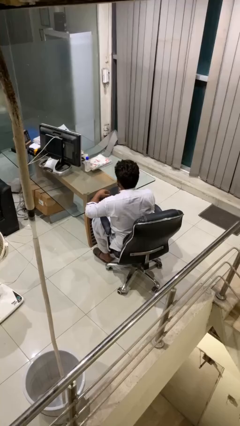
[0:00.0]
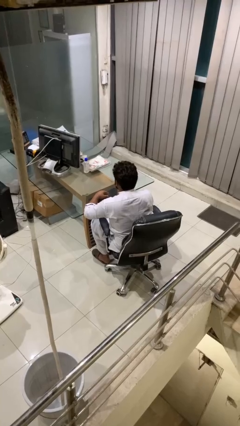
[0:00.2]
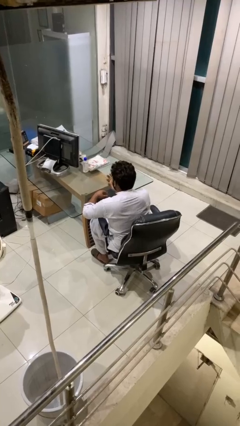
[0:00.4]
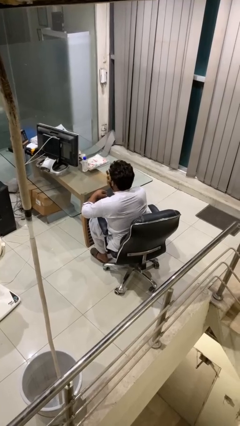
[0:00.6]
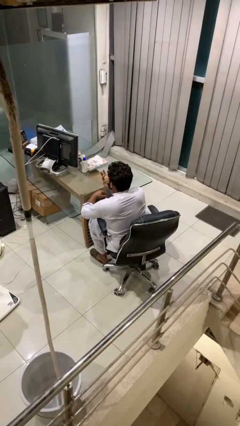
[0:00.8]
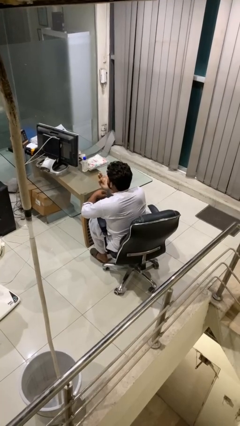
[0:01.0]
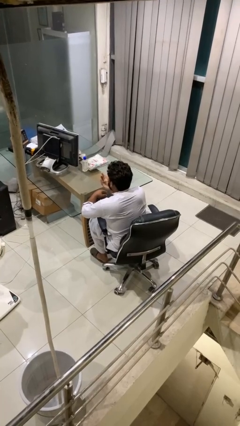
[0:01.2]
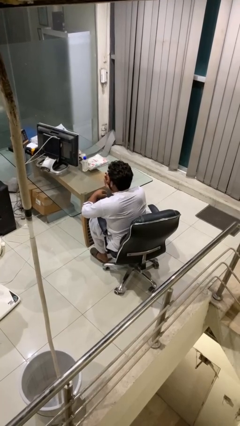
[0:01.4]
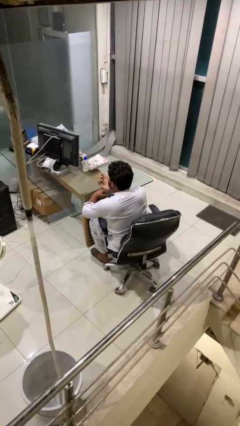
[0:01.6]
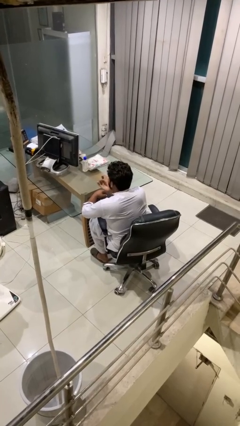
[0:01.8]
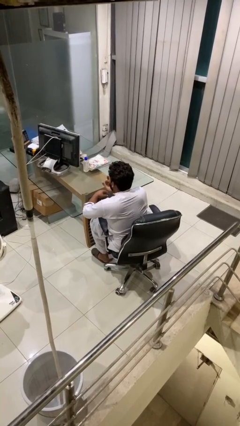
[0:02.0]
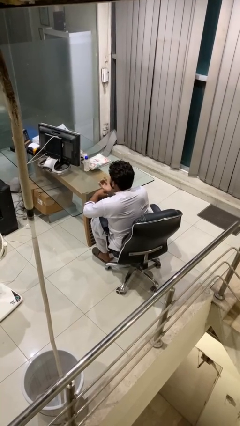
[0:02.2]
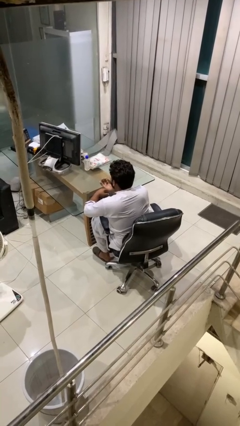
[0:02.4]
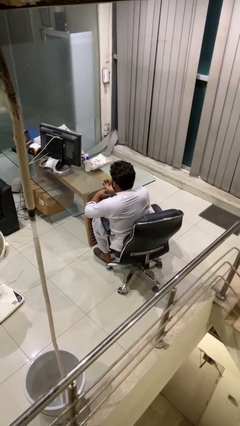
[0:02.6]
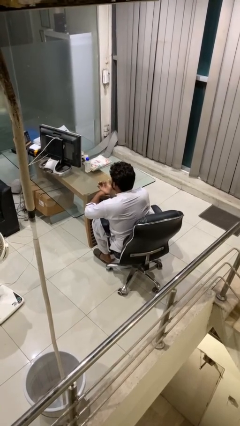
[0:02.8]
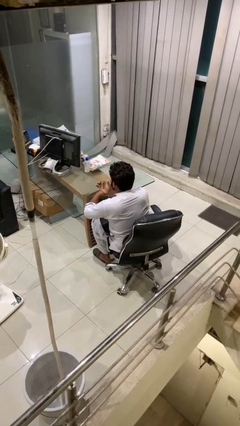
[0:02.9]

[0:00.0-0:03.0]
person licks fingers

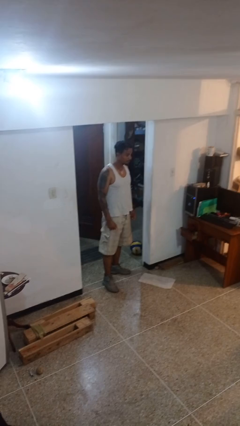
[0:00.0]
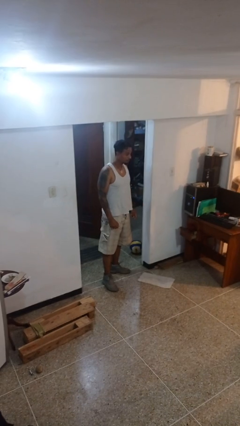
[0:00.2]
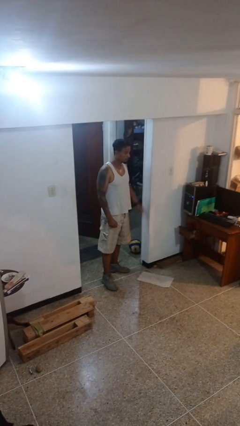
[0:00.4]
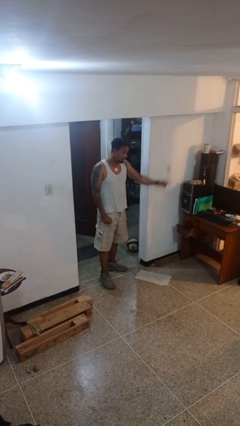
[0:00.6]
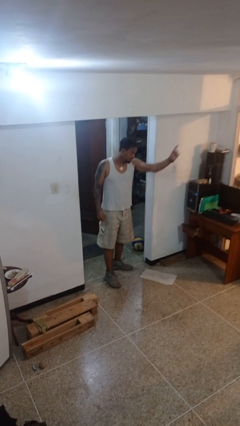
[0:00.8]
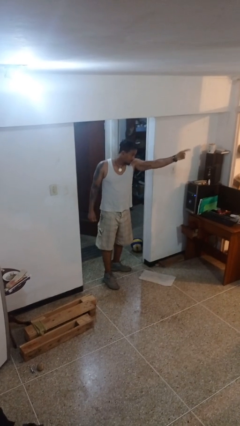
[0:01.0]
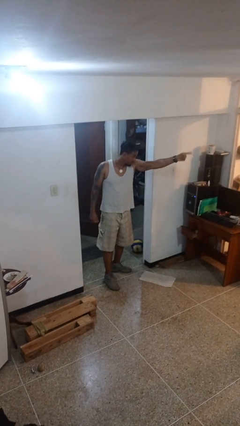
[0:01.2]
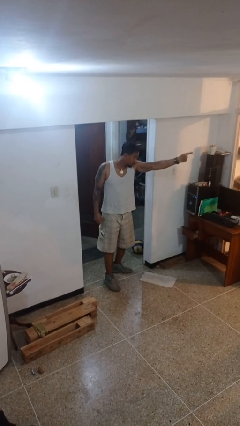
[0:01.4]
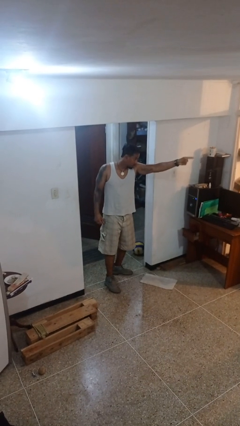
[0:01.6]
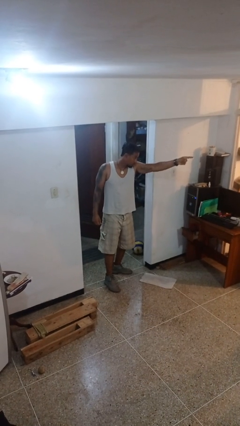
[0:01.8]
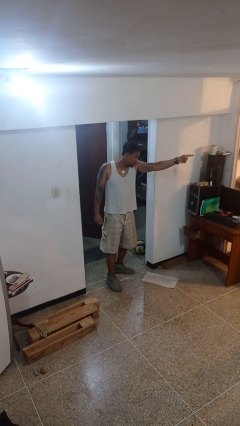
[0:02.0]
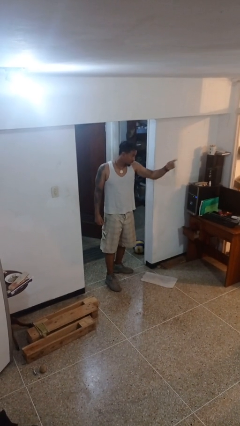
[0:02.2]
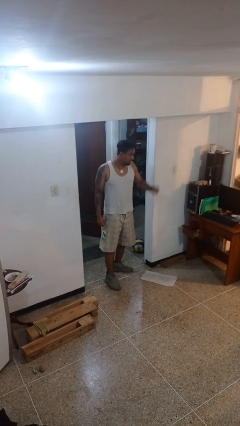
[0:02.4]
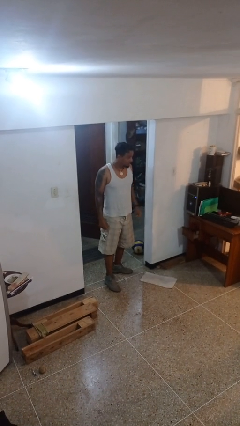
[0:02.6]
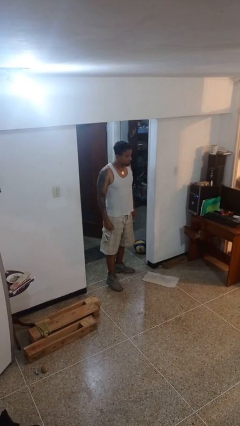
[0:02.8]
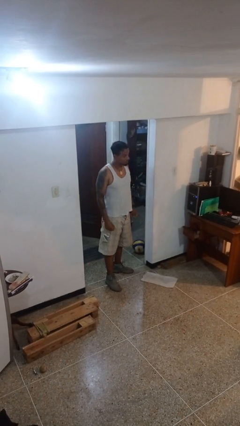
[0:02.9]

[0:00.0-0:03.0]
person points at person

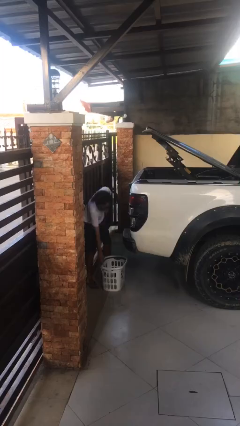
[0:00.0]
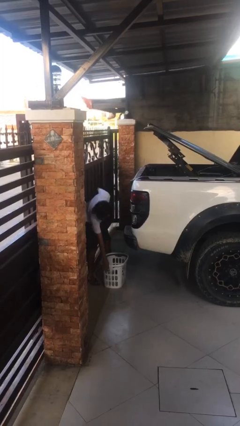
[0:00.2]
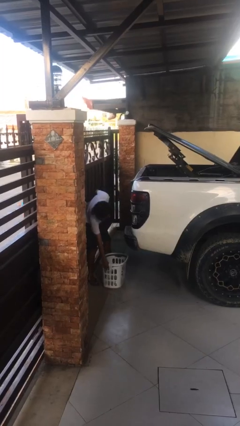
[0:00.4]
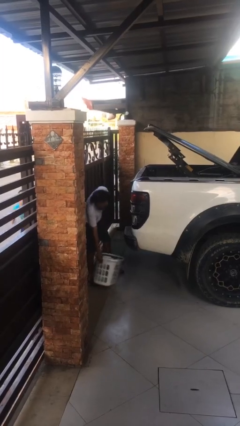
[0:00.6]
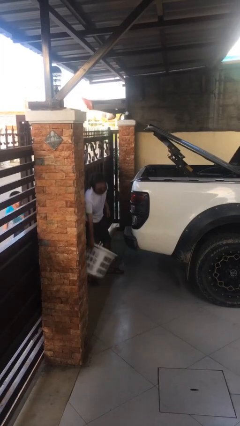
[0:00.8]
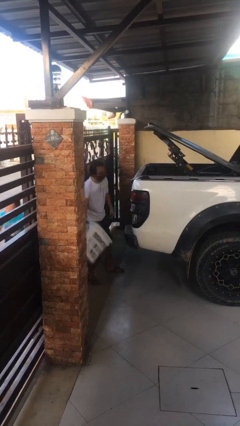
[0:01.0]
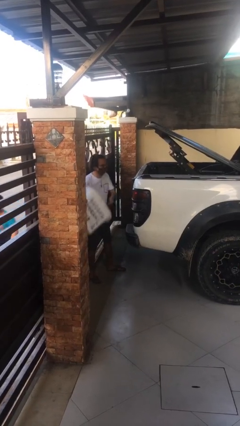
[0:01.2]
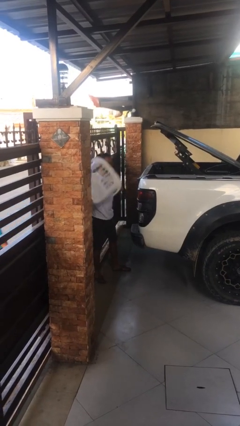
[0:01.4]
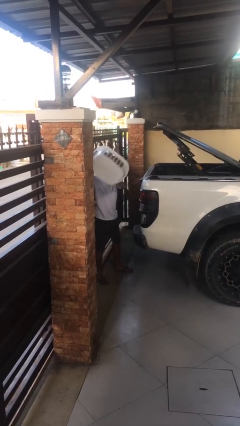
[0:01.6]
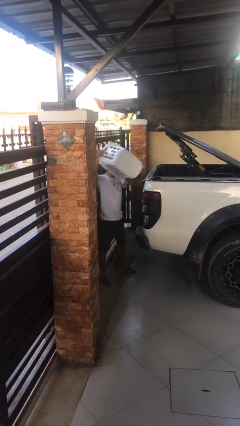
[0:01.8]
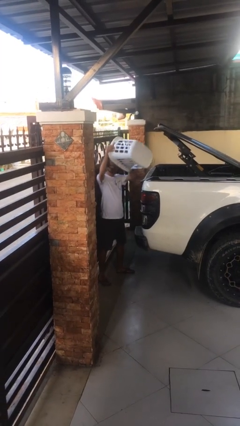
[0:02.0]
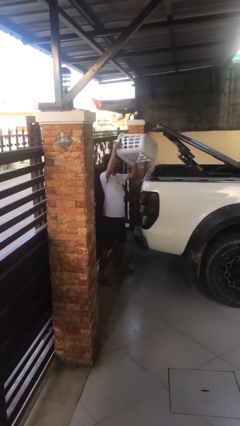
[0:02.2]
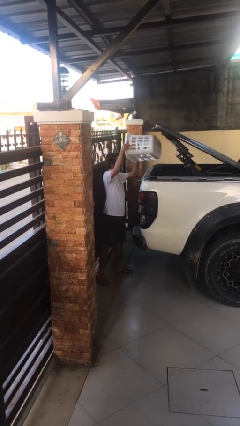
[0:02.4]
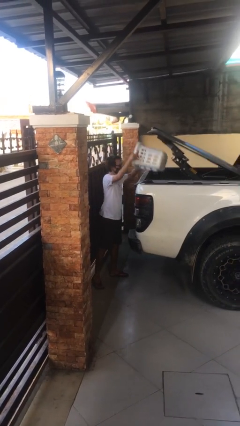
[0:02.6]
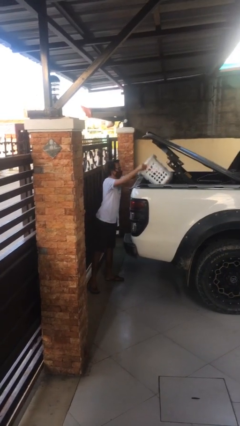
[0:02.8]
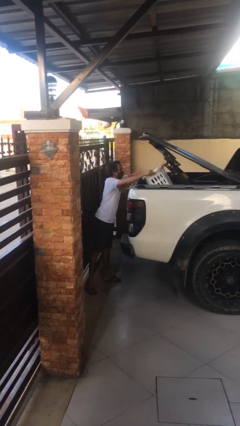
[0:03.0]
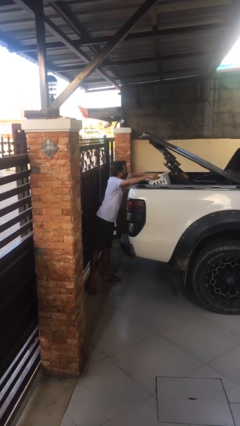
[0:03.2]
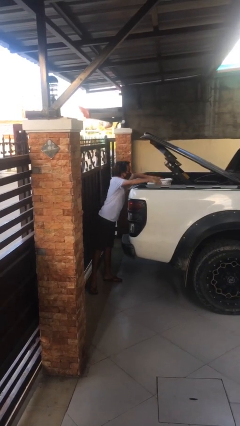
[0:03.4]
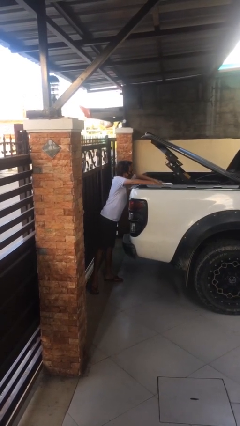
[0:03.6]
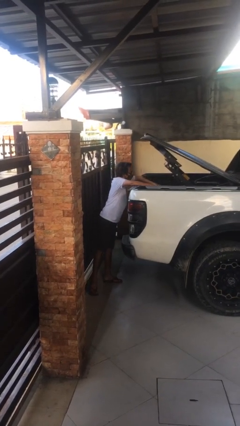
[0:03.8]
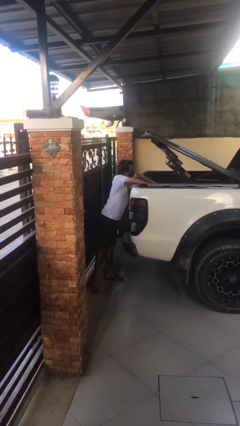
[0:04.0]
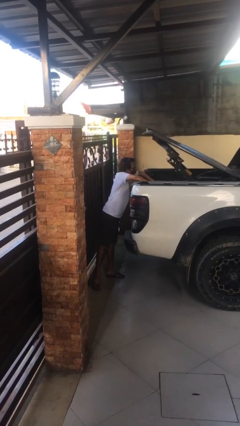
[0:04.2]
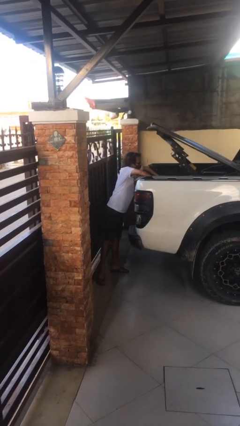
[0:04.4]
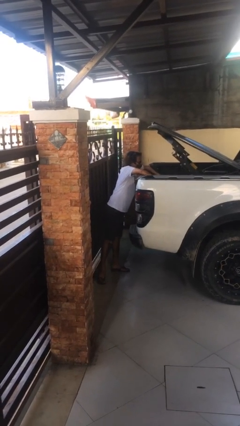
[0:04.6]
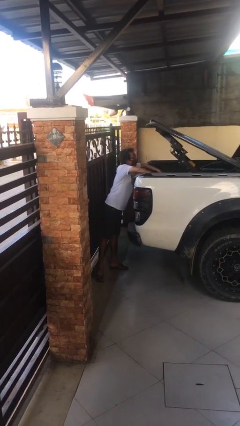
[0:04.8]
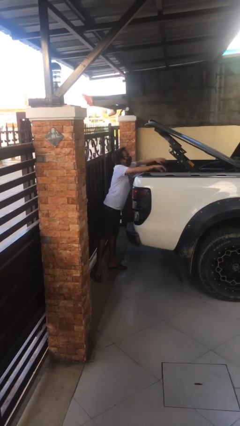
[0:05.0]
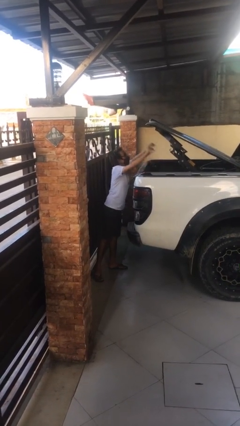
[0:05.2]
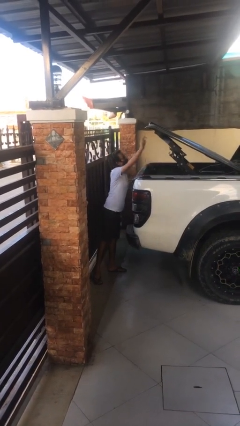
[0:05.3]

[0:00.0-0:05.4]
person loads car

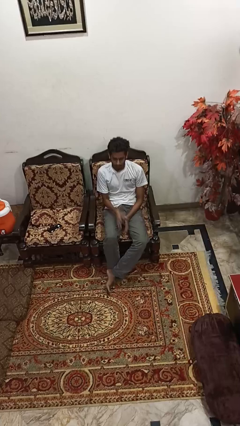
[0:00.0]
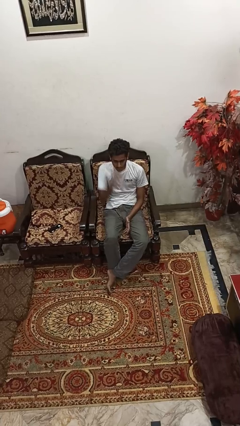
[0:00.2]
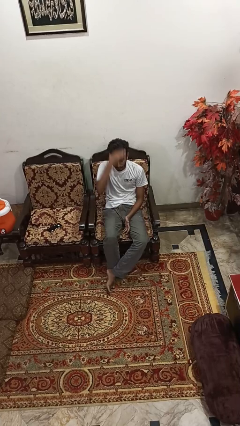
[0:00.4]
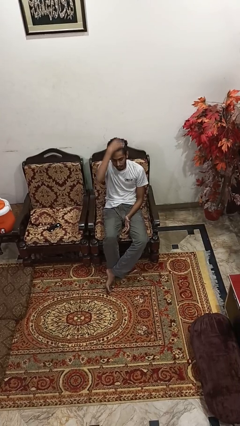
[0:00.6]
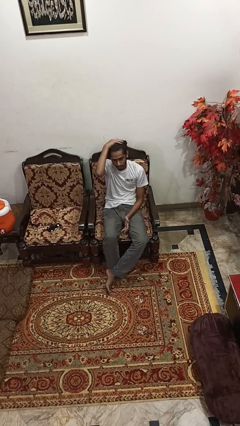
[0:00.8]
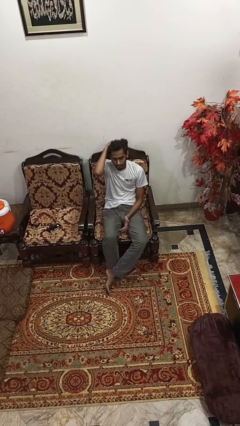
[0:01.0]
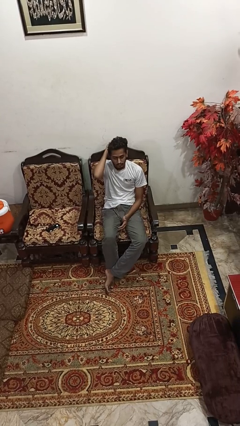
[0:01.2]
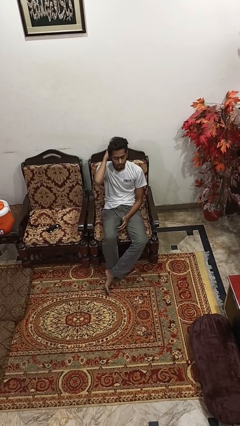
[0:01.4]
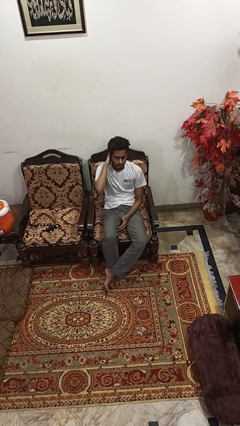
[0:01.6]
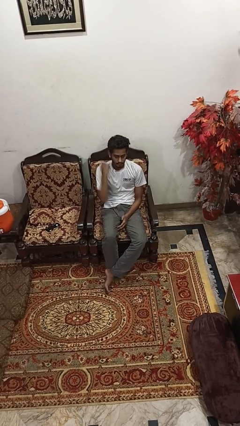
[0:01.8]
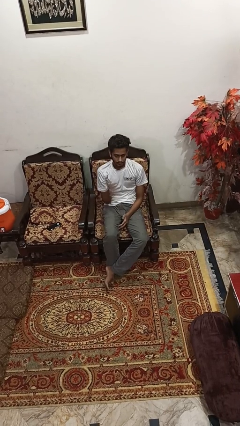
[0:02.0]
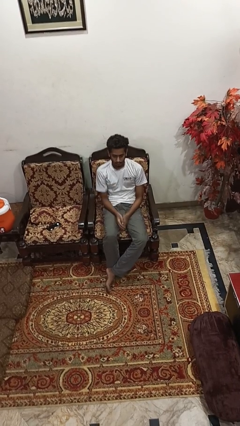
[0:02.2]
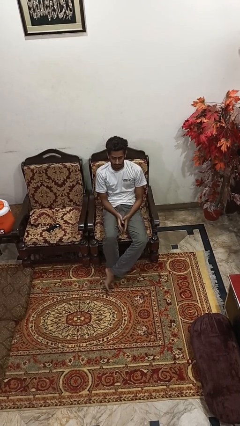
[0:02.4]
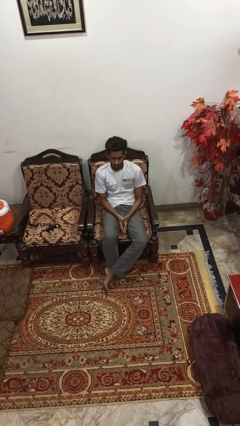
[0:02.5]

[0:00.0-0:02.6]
person strokes hair

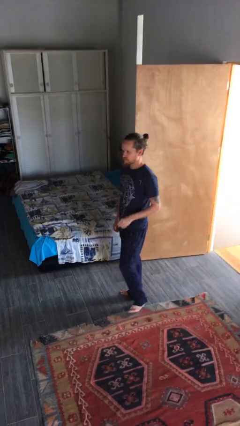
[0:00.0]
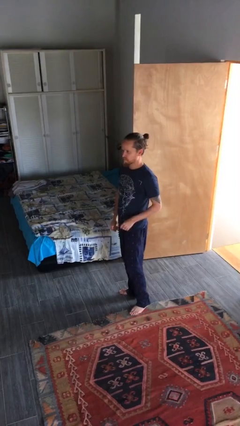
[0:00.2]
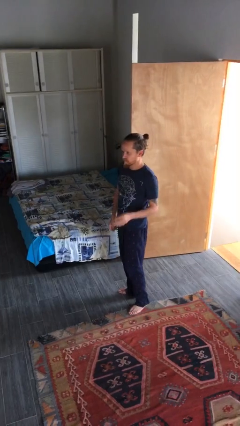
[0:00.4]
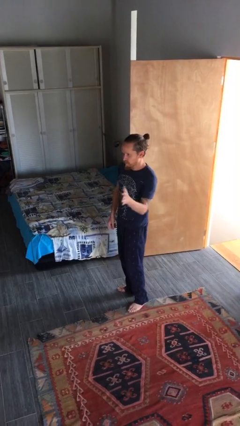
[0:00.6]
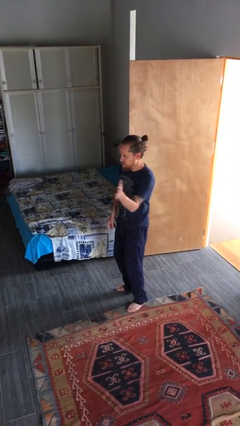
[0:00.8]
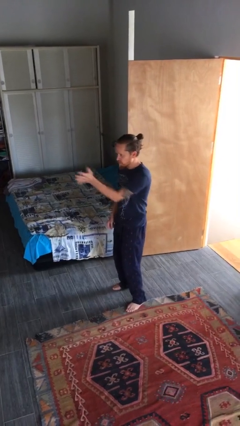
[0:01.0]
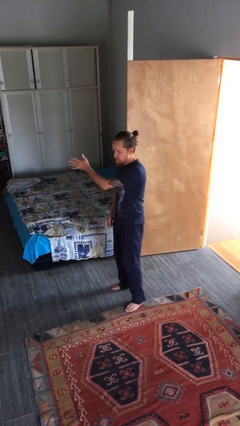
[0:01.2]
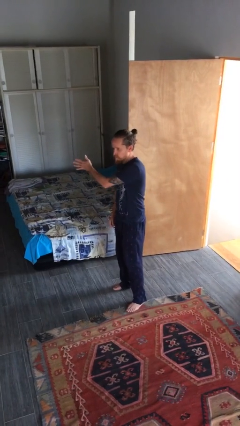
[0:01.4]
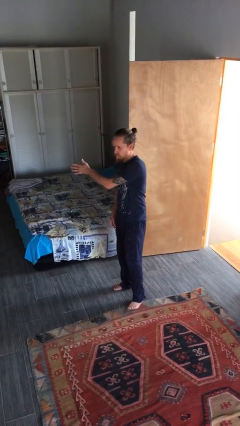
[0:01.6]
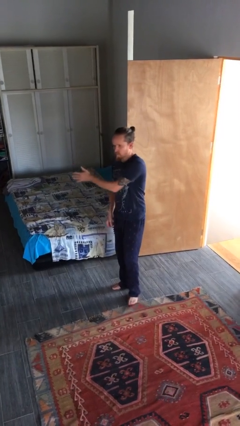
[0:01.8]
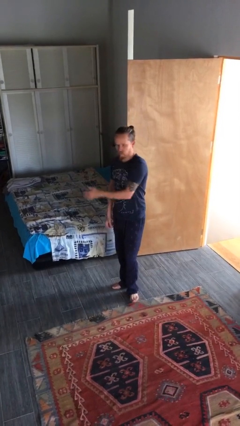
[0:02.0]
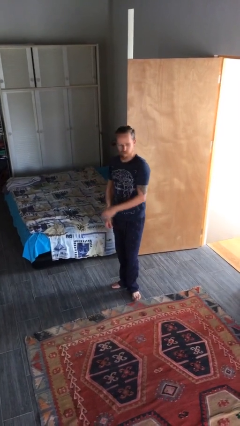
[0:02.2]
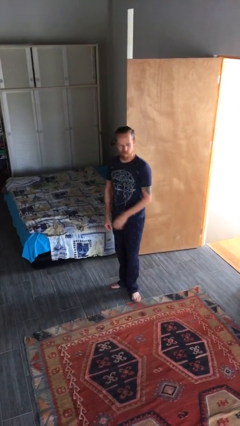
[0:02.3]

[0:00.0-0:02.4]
person gestures swipe right

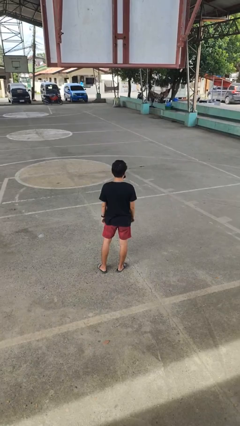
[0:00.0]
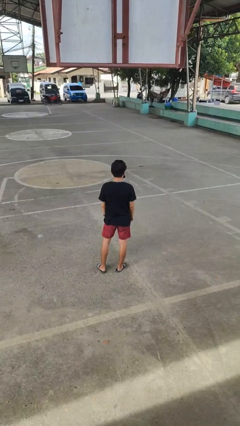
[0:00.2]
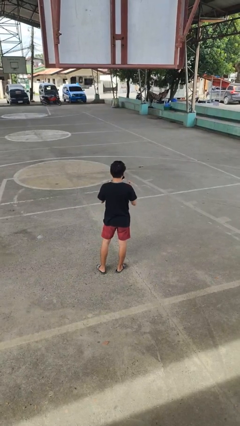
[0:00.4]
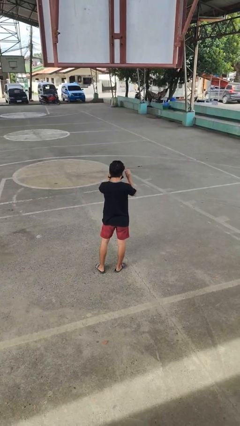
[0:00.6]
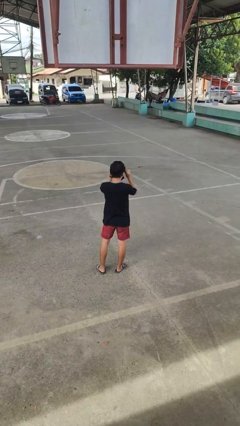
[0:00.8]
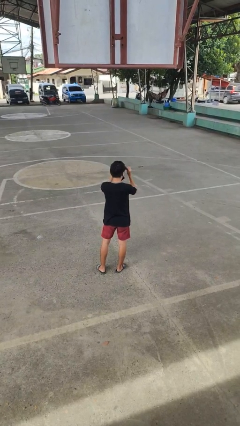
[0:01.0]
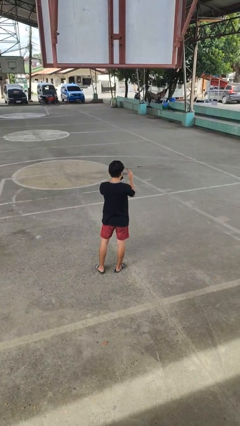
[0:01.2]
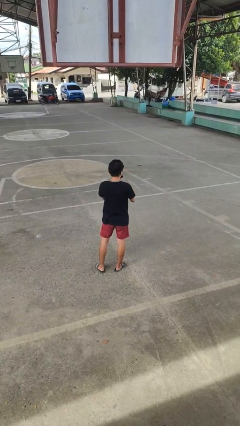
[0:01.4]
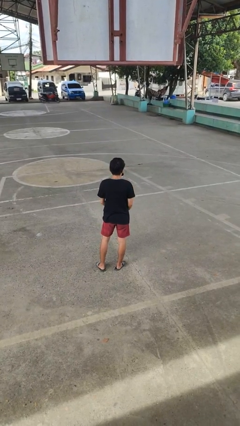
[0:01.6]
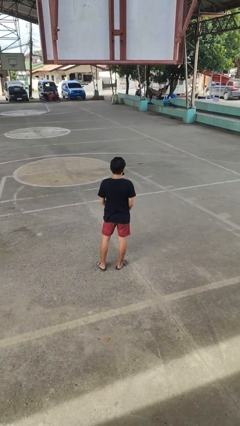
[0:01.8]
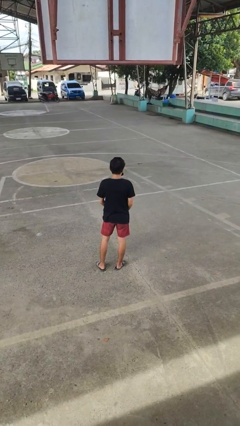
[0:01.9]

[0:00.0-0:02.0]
person takes off glasses
